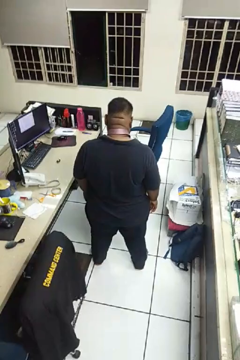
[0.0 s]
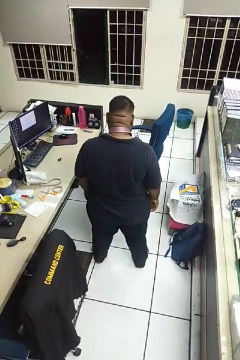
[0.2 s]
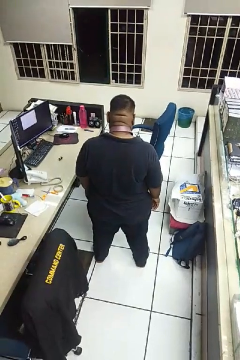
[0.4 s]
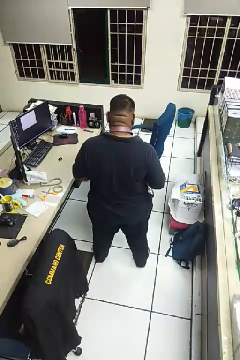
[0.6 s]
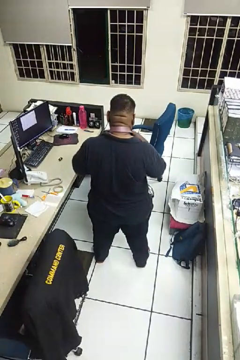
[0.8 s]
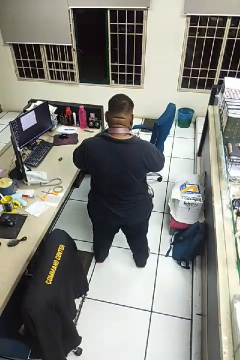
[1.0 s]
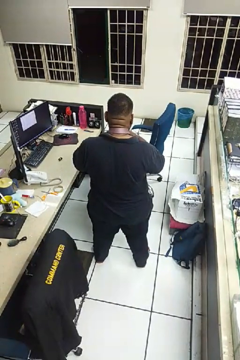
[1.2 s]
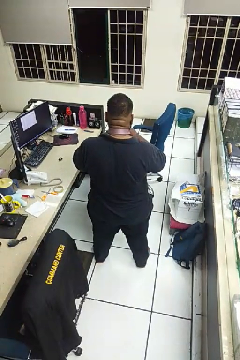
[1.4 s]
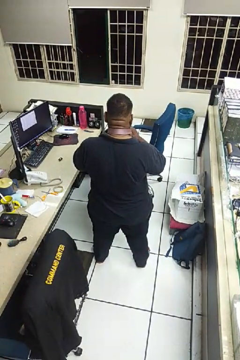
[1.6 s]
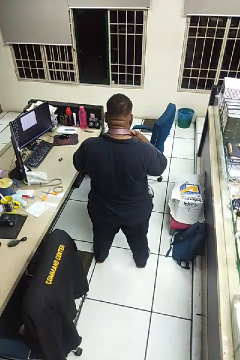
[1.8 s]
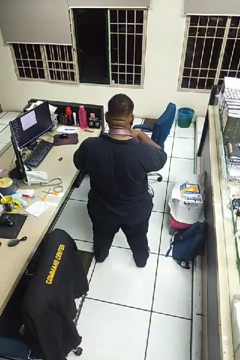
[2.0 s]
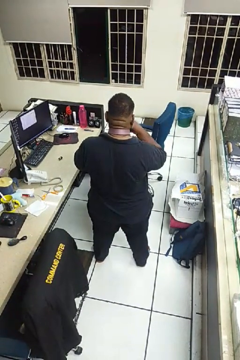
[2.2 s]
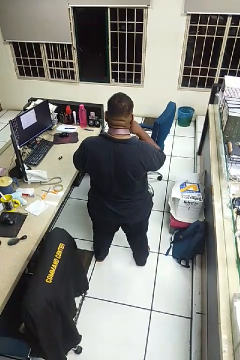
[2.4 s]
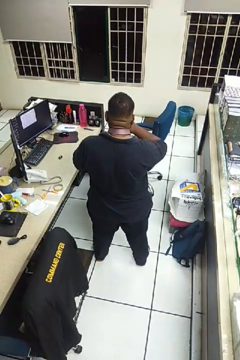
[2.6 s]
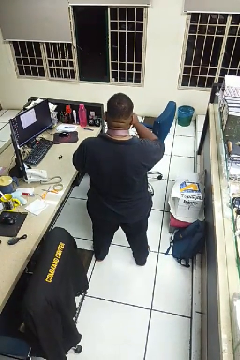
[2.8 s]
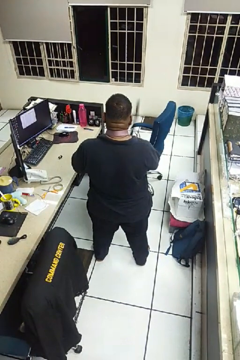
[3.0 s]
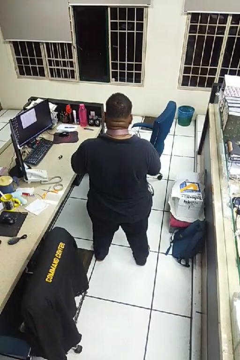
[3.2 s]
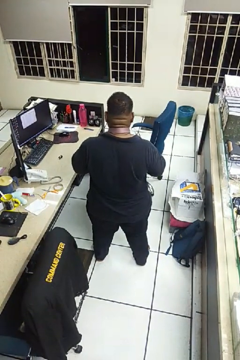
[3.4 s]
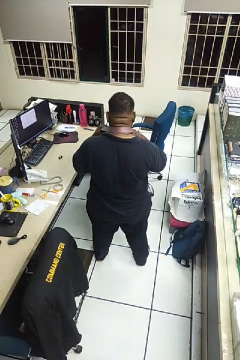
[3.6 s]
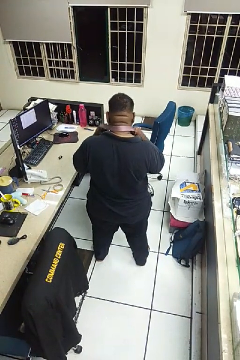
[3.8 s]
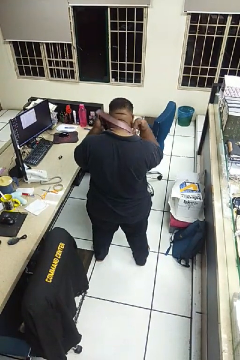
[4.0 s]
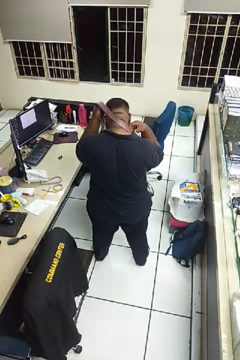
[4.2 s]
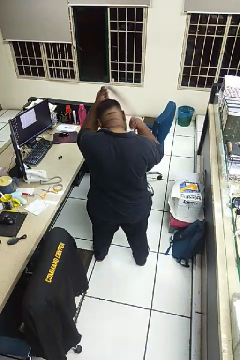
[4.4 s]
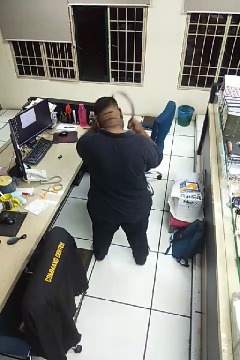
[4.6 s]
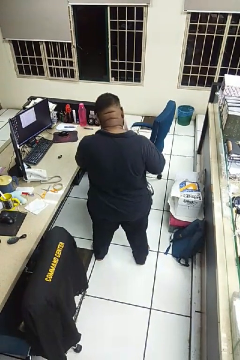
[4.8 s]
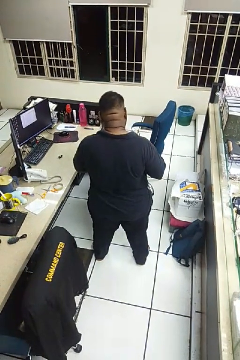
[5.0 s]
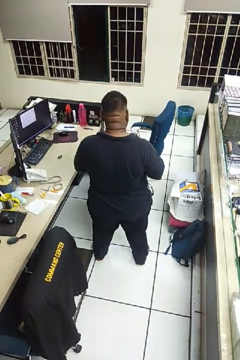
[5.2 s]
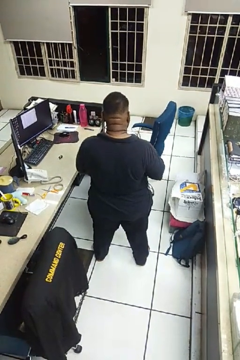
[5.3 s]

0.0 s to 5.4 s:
person takes off necktie

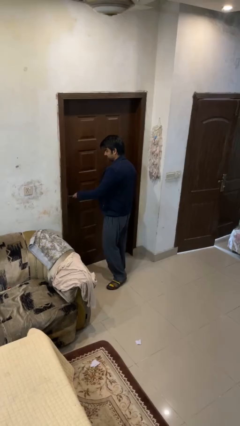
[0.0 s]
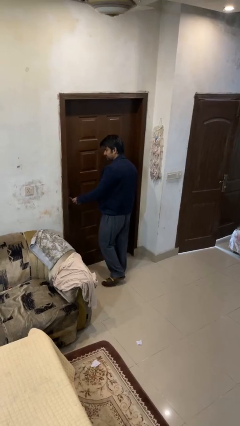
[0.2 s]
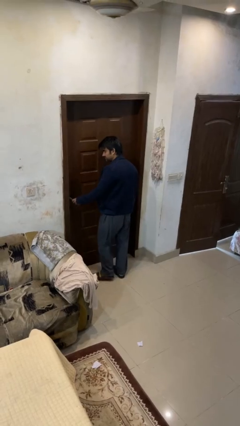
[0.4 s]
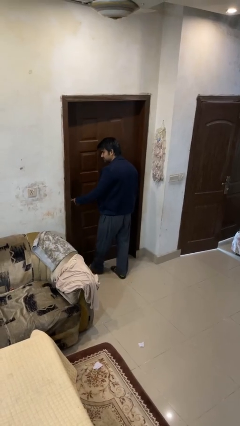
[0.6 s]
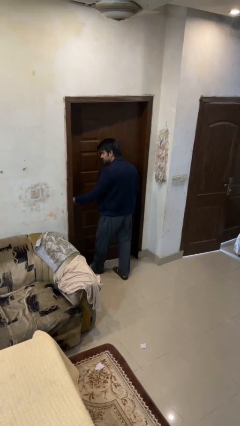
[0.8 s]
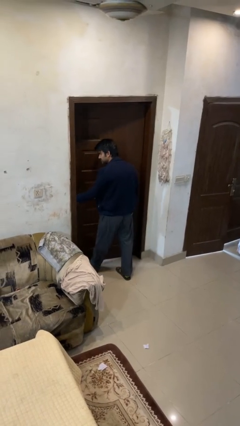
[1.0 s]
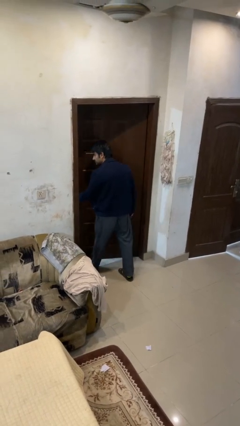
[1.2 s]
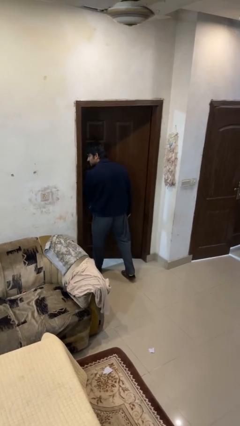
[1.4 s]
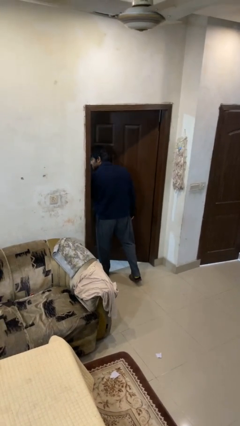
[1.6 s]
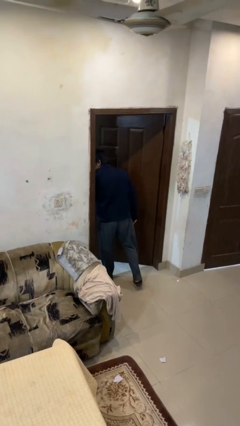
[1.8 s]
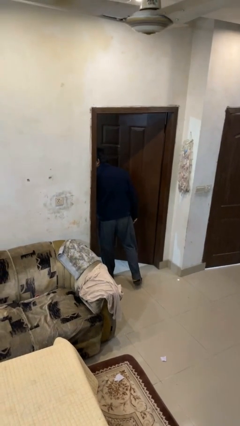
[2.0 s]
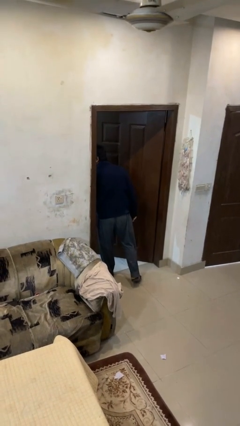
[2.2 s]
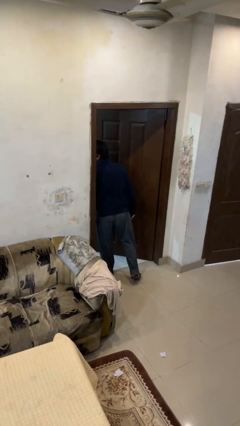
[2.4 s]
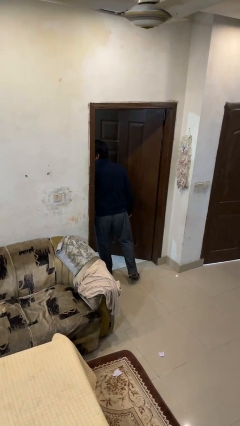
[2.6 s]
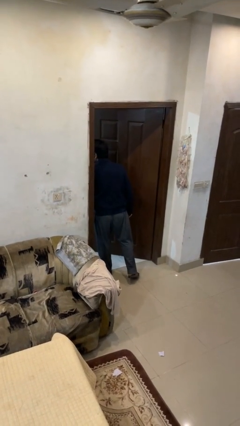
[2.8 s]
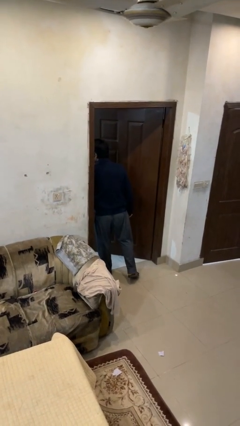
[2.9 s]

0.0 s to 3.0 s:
person opens facility door

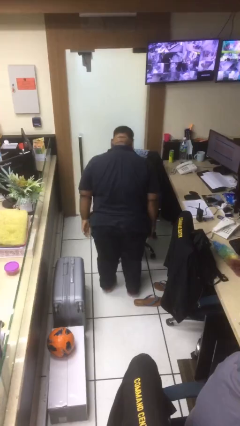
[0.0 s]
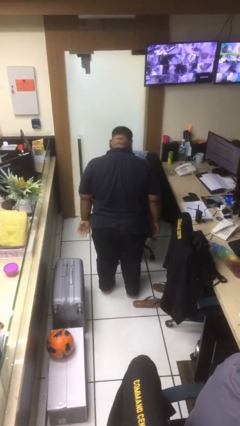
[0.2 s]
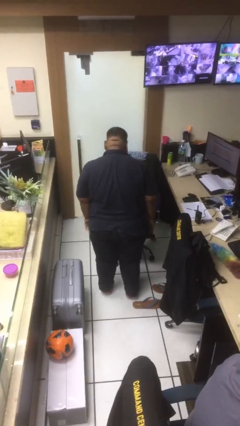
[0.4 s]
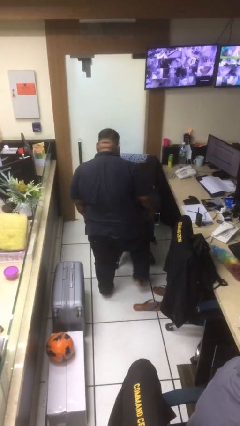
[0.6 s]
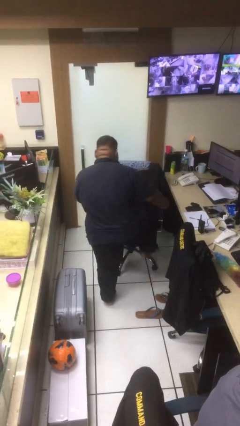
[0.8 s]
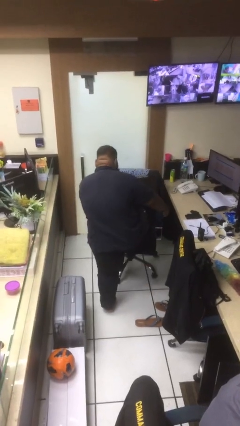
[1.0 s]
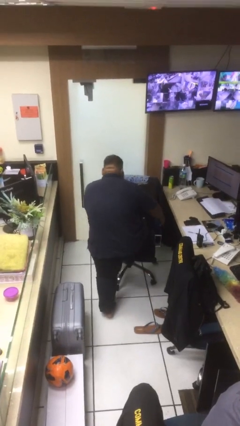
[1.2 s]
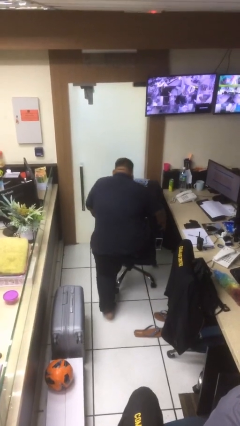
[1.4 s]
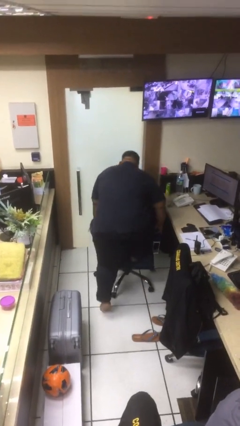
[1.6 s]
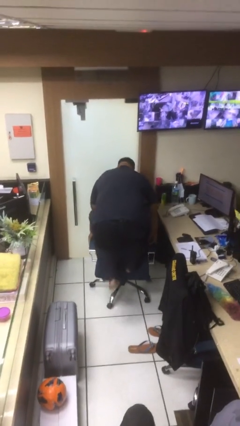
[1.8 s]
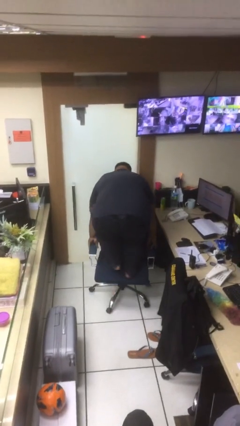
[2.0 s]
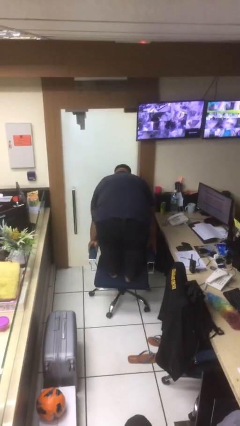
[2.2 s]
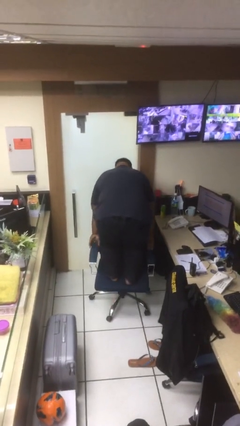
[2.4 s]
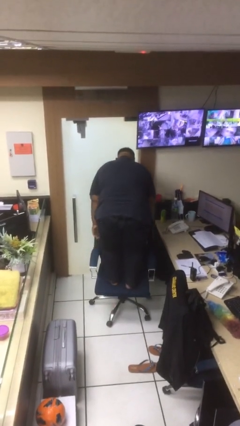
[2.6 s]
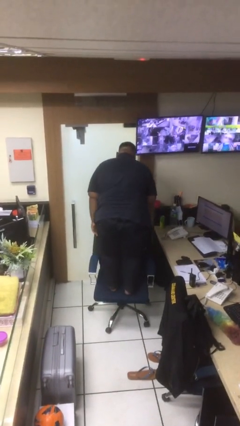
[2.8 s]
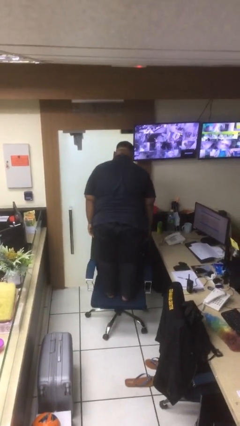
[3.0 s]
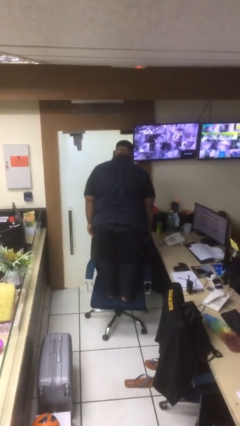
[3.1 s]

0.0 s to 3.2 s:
person climbs on chair

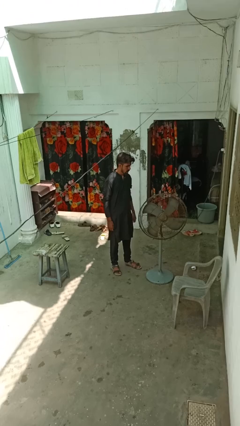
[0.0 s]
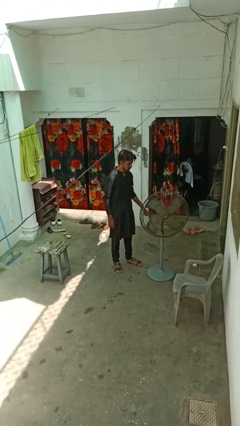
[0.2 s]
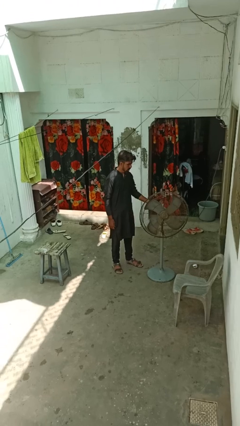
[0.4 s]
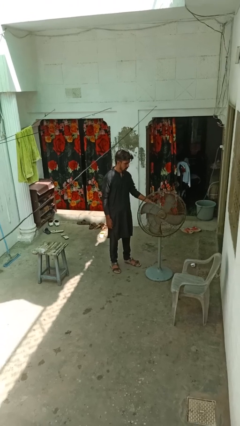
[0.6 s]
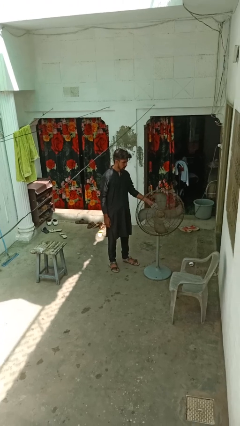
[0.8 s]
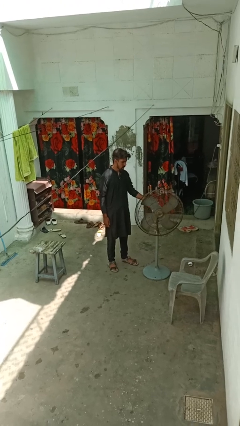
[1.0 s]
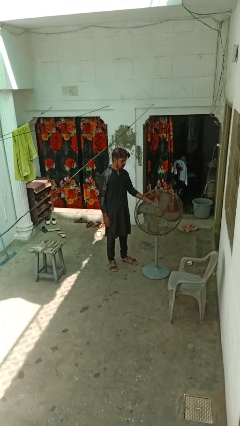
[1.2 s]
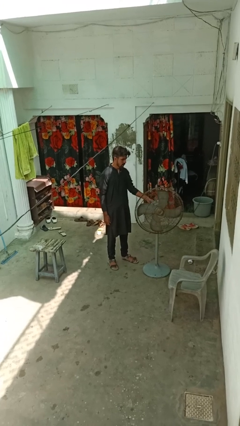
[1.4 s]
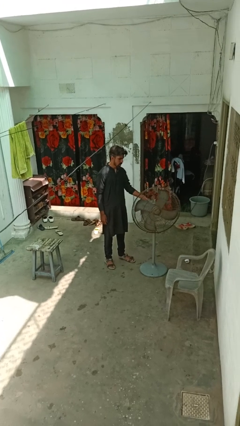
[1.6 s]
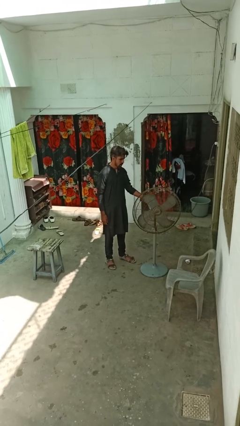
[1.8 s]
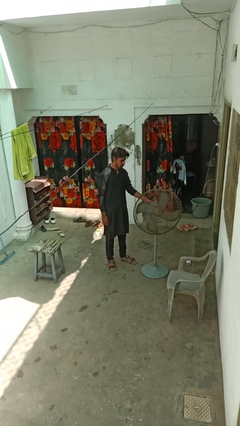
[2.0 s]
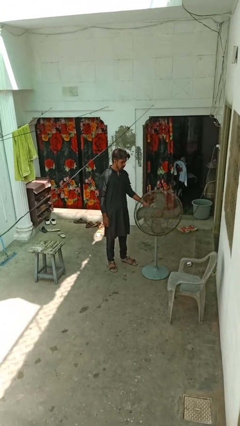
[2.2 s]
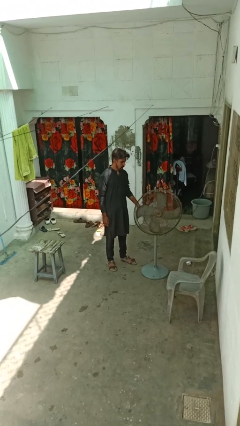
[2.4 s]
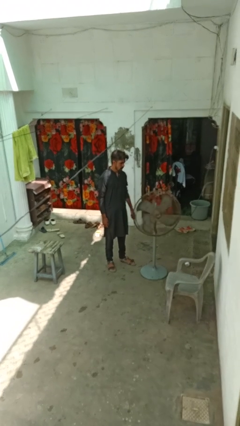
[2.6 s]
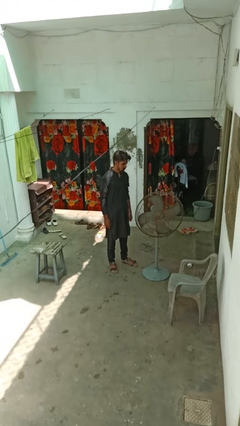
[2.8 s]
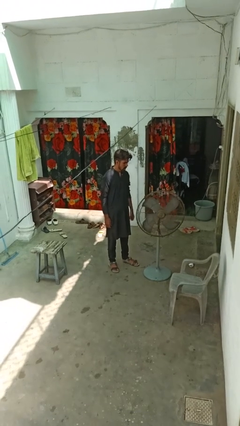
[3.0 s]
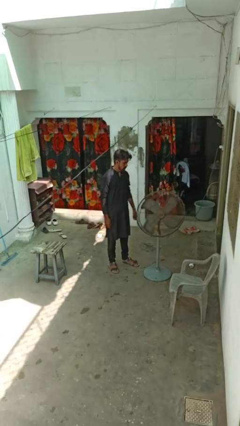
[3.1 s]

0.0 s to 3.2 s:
person turns on fan

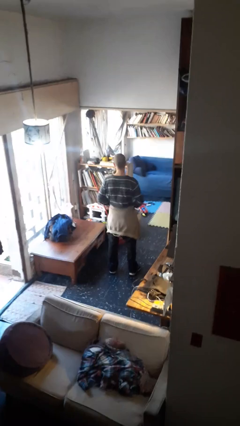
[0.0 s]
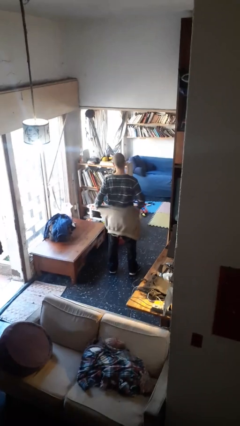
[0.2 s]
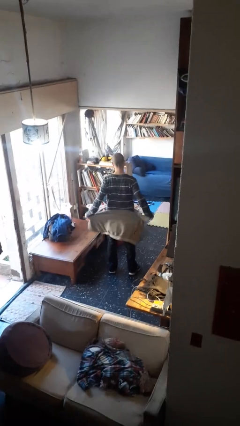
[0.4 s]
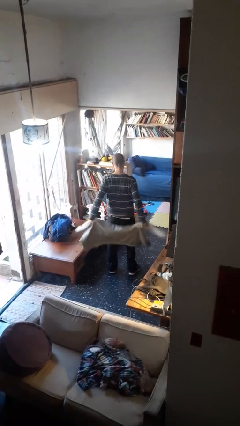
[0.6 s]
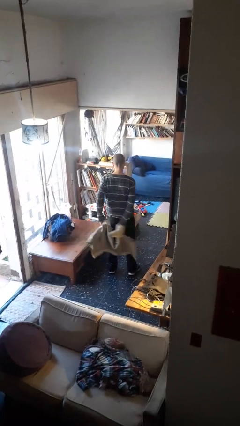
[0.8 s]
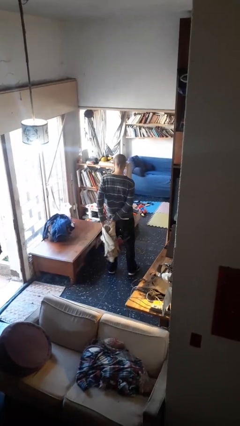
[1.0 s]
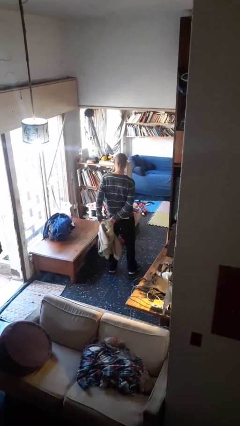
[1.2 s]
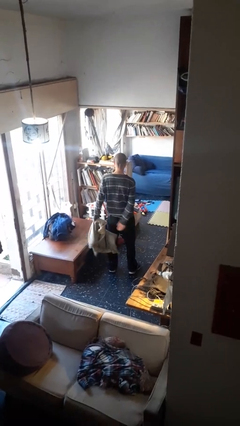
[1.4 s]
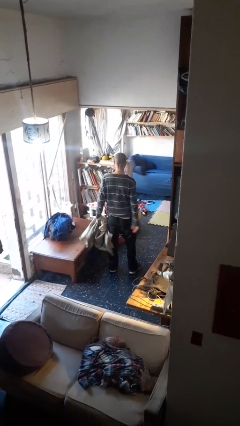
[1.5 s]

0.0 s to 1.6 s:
person unties jacket around waist

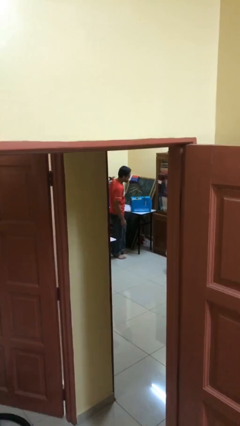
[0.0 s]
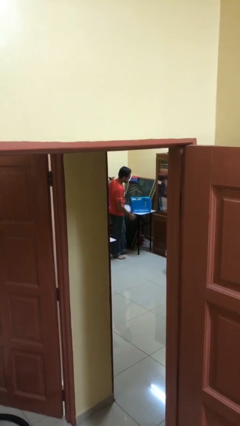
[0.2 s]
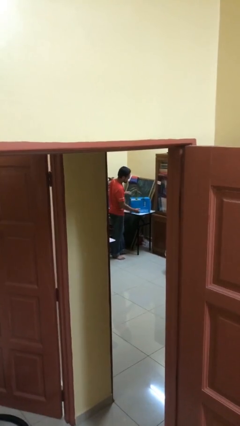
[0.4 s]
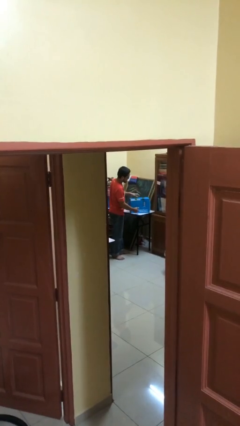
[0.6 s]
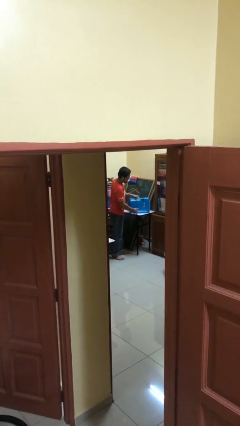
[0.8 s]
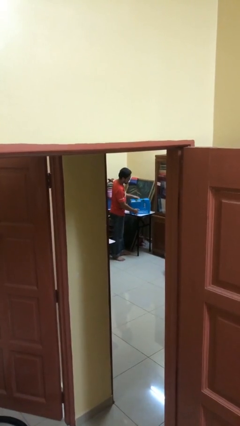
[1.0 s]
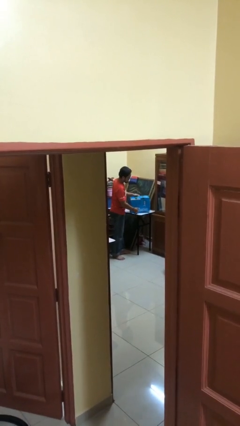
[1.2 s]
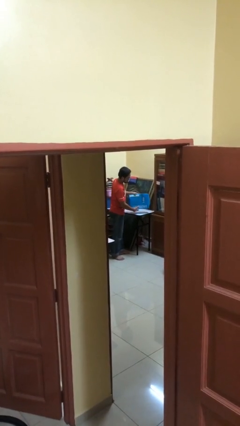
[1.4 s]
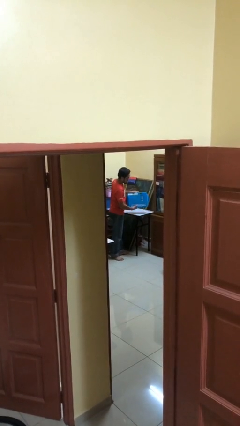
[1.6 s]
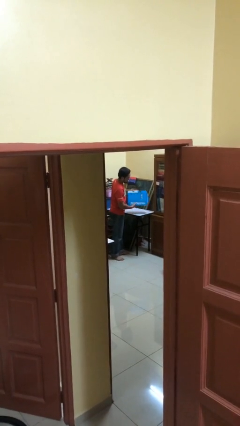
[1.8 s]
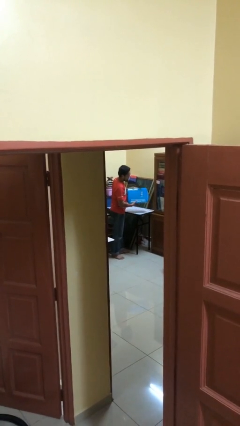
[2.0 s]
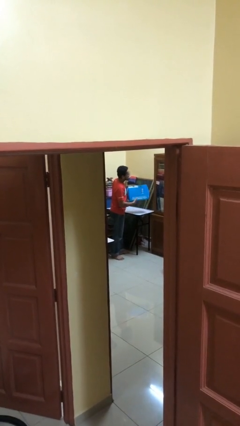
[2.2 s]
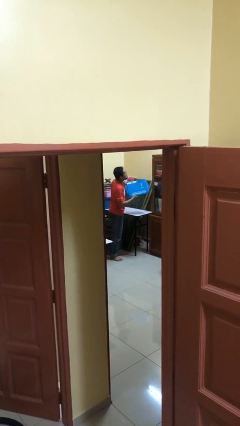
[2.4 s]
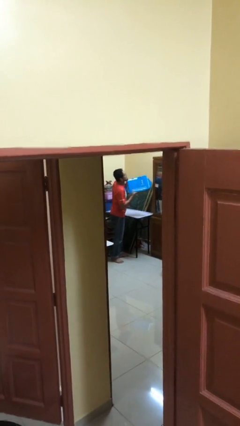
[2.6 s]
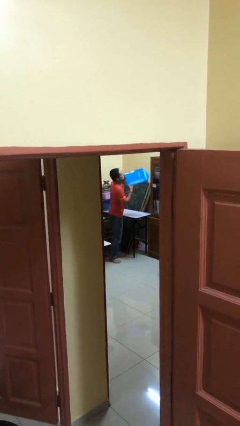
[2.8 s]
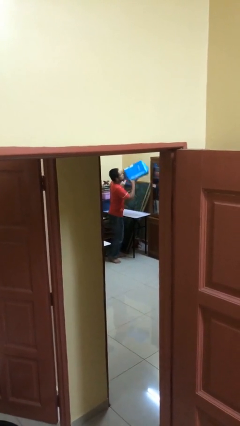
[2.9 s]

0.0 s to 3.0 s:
person picks up object from table
